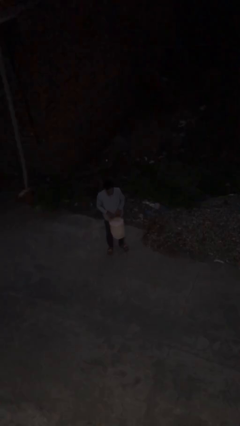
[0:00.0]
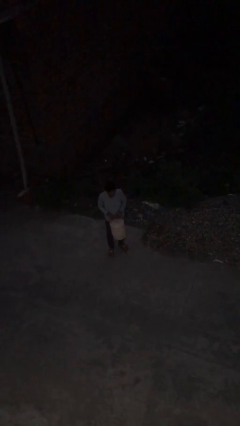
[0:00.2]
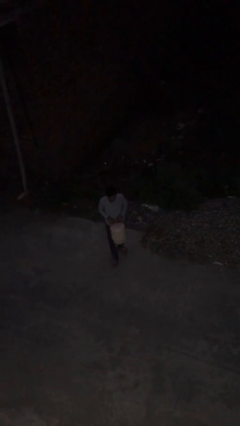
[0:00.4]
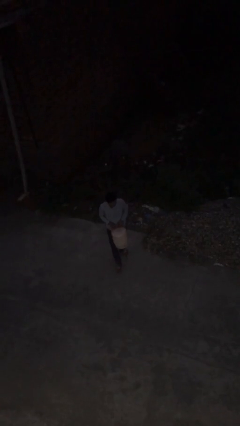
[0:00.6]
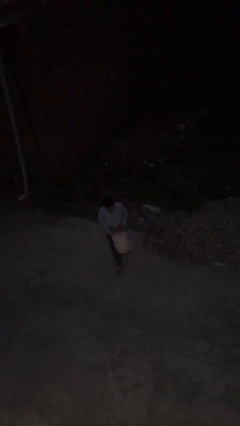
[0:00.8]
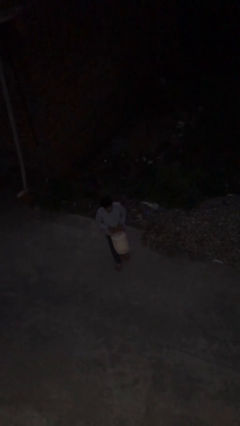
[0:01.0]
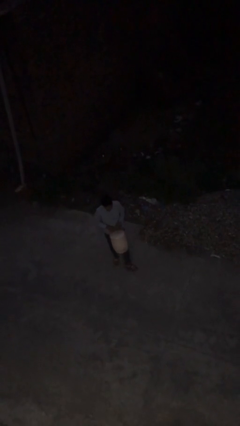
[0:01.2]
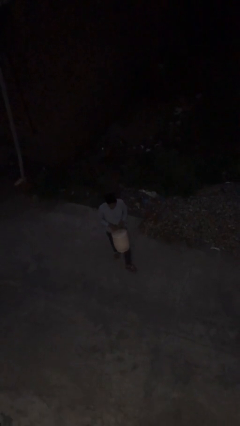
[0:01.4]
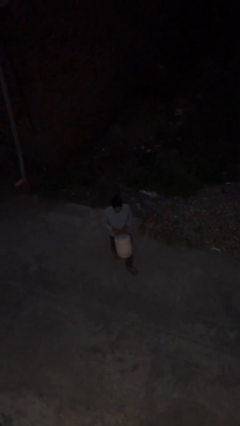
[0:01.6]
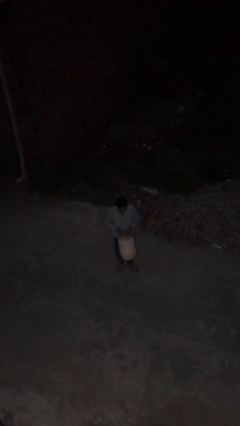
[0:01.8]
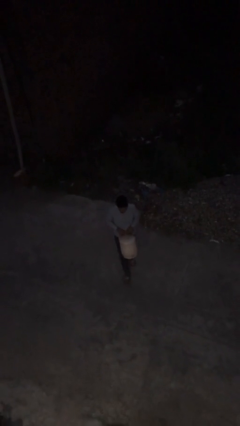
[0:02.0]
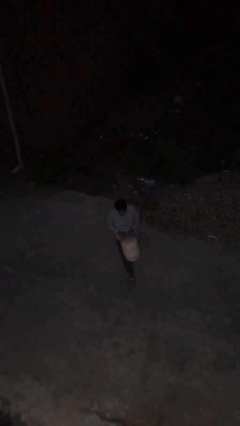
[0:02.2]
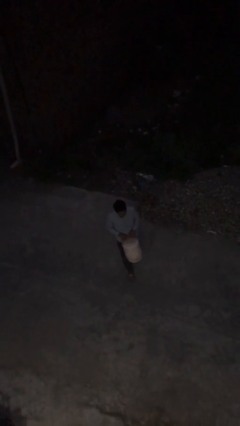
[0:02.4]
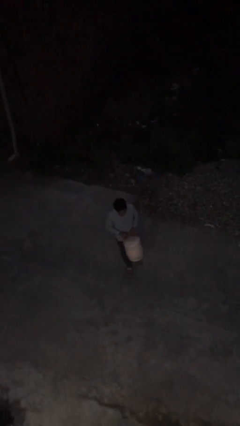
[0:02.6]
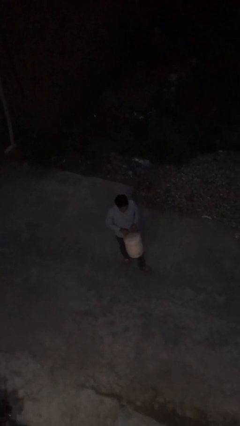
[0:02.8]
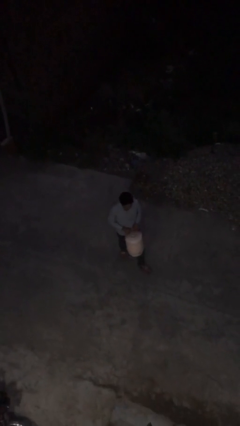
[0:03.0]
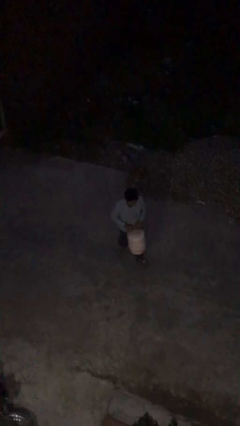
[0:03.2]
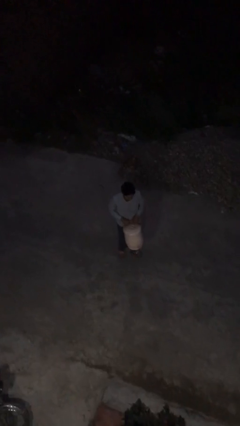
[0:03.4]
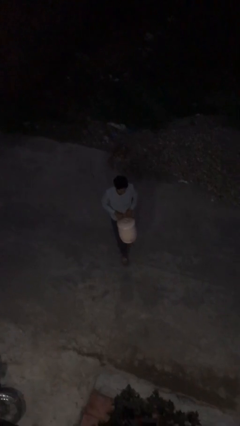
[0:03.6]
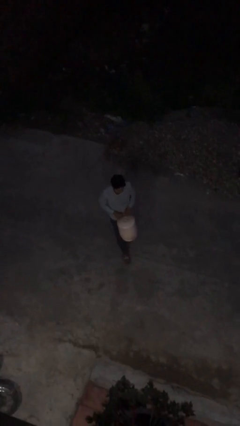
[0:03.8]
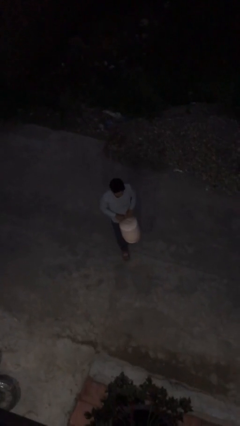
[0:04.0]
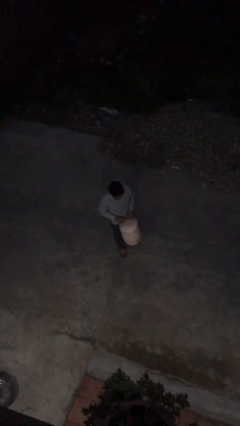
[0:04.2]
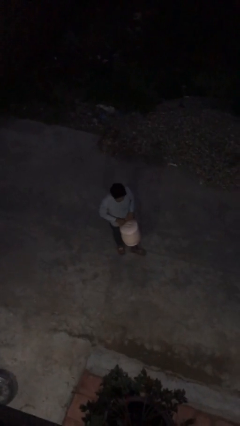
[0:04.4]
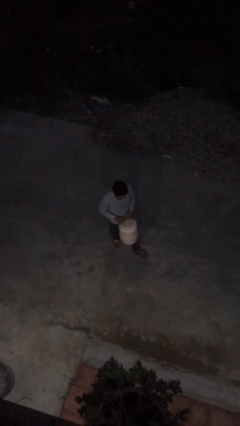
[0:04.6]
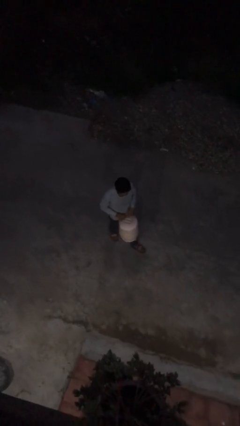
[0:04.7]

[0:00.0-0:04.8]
person carries heavy object

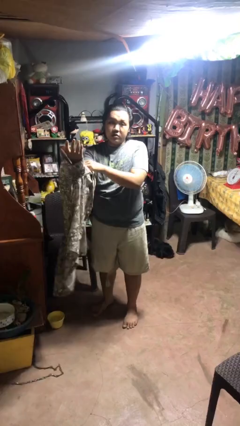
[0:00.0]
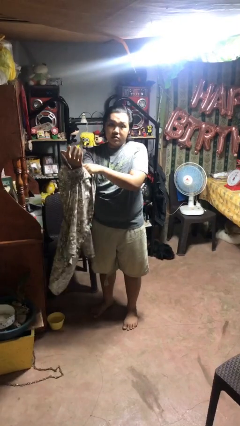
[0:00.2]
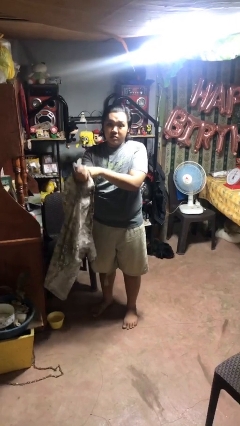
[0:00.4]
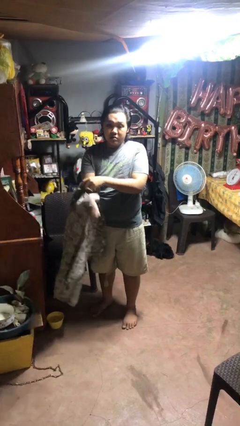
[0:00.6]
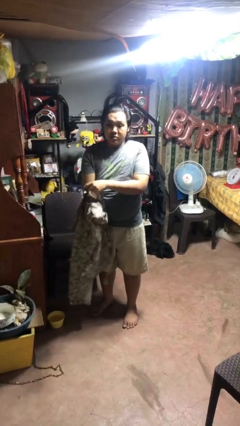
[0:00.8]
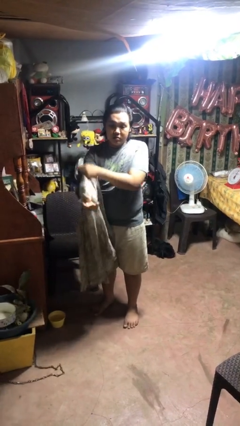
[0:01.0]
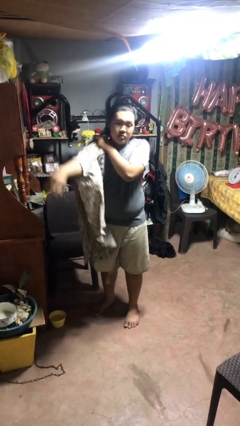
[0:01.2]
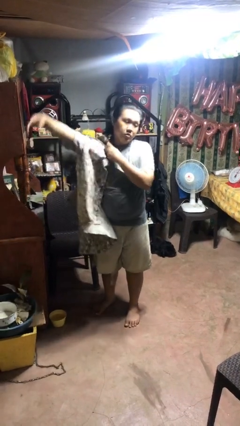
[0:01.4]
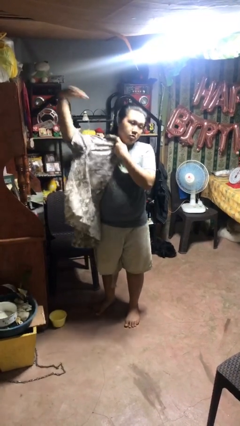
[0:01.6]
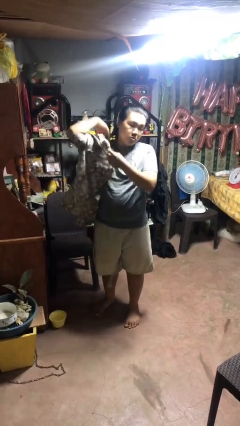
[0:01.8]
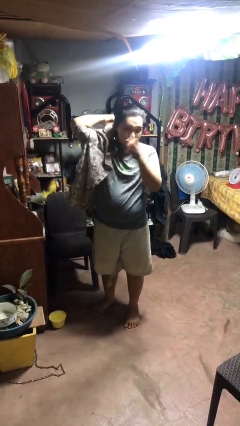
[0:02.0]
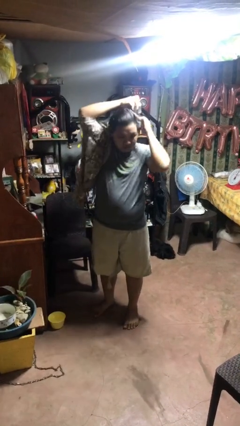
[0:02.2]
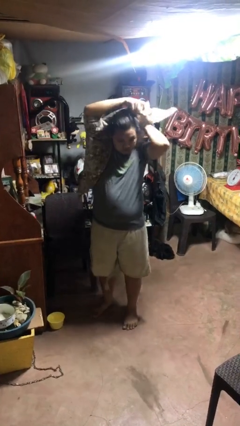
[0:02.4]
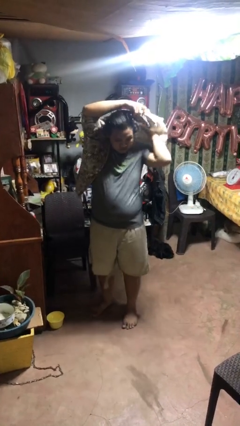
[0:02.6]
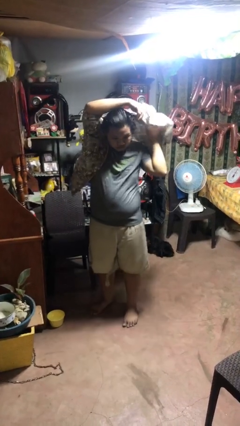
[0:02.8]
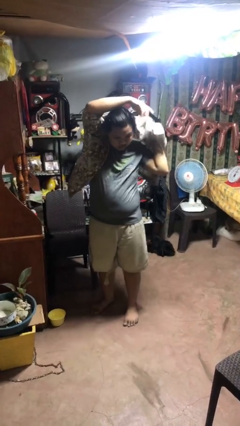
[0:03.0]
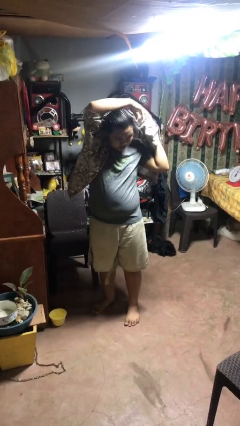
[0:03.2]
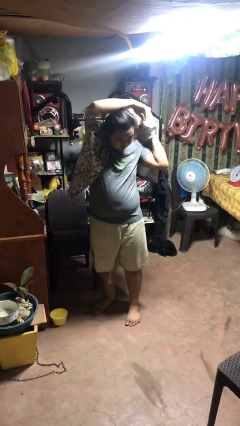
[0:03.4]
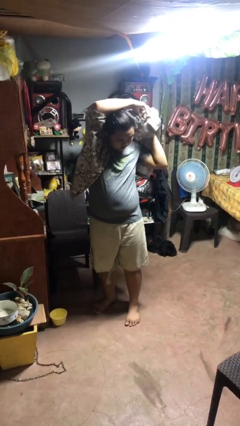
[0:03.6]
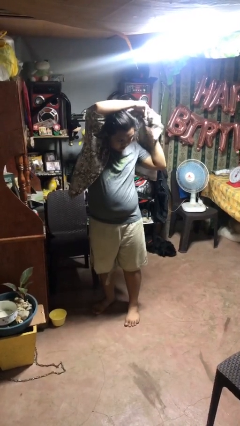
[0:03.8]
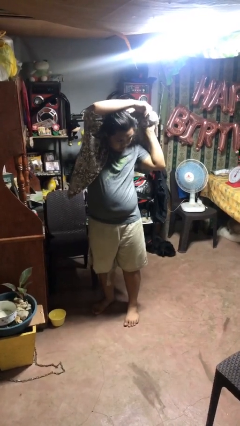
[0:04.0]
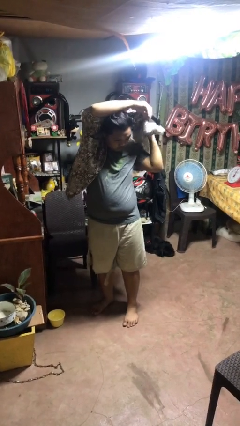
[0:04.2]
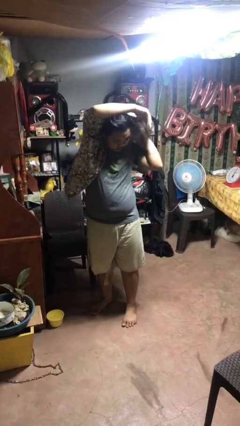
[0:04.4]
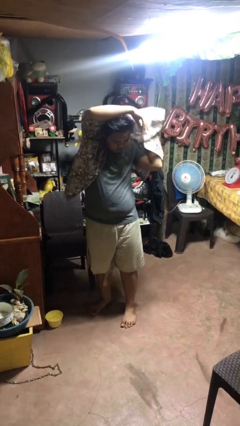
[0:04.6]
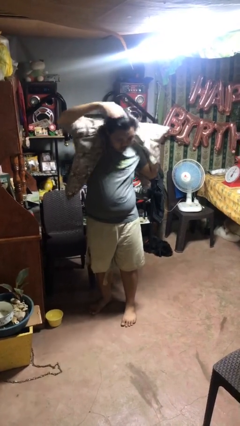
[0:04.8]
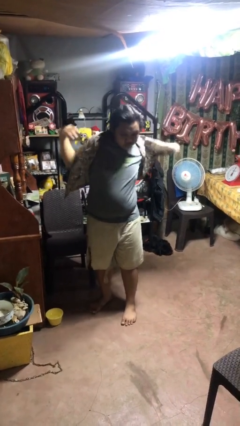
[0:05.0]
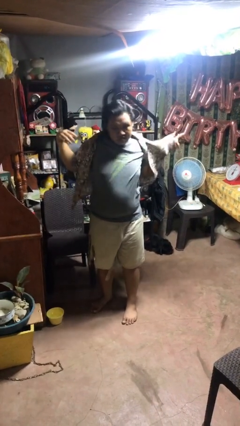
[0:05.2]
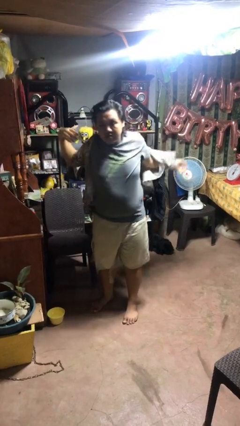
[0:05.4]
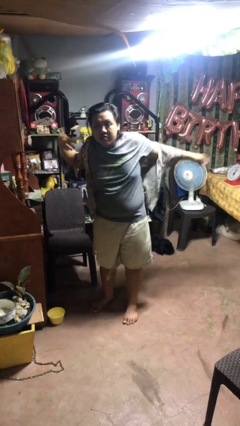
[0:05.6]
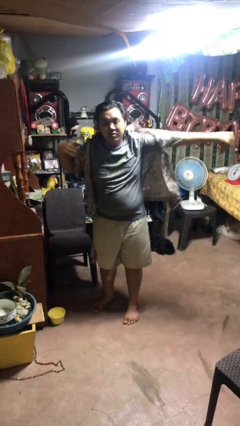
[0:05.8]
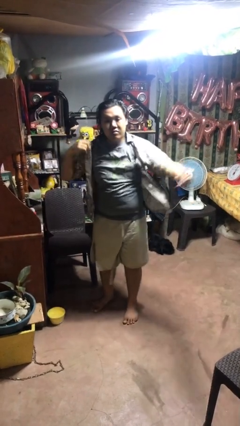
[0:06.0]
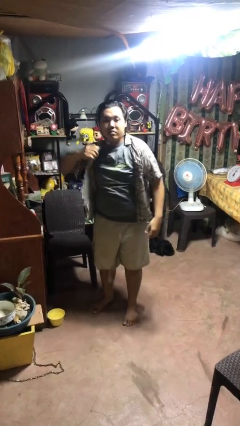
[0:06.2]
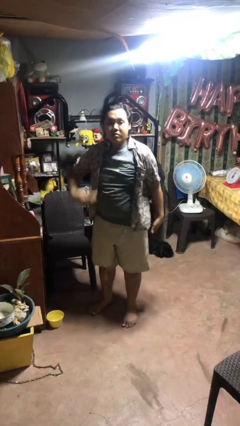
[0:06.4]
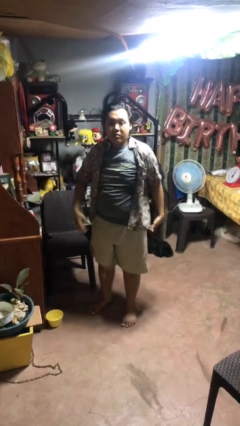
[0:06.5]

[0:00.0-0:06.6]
person puts on shirt

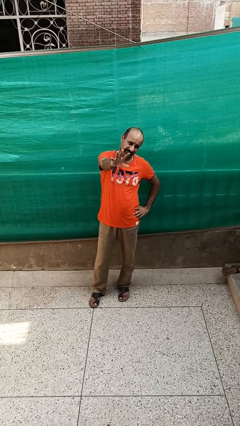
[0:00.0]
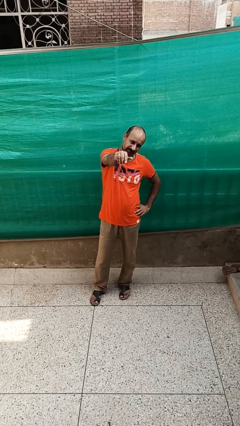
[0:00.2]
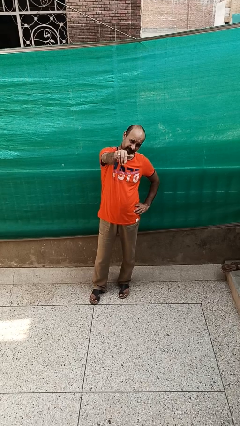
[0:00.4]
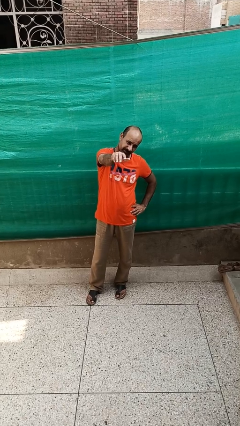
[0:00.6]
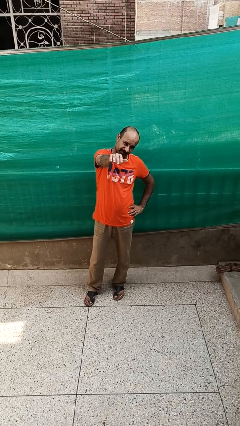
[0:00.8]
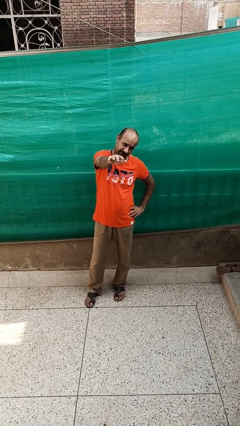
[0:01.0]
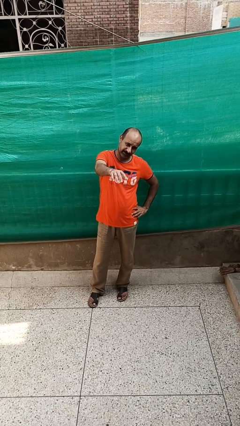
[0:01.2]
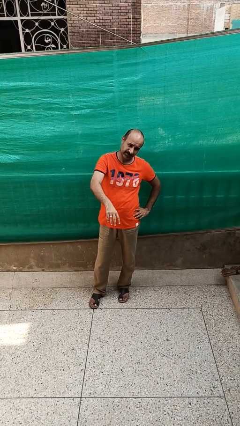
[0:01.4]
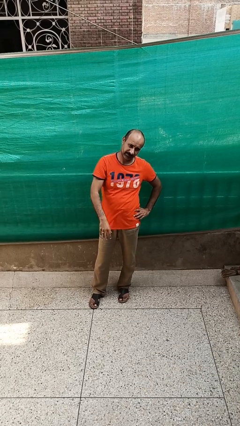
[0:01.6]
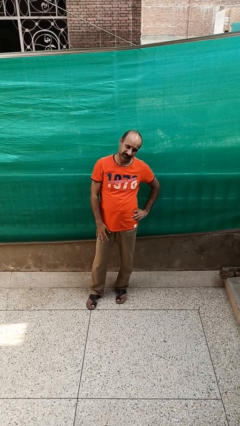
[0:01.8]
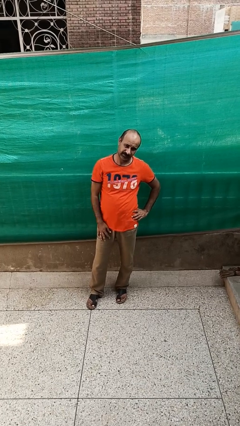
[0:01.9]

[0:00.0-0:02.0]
person gestures come here

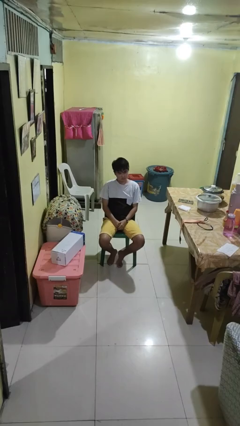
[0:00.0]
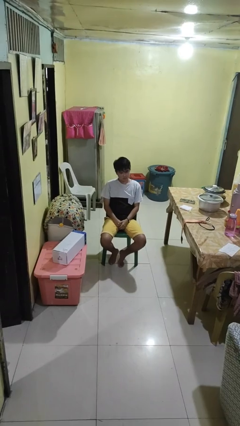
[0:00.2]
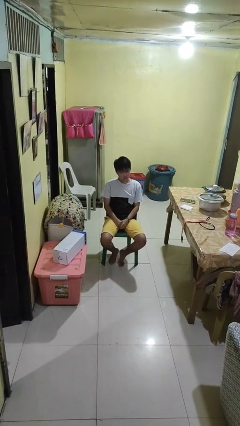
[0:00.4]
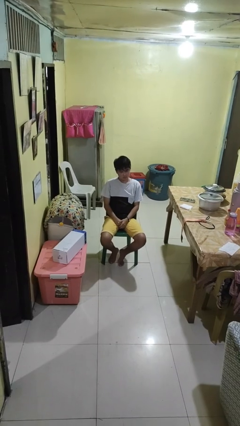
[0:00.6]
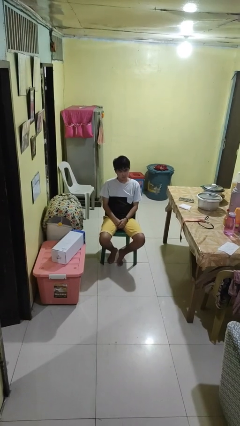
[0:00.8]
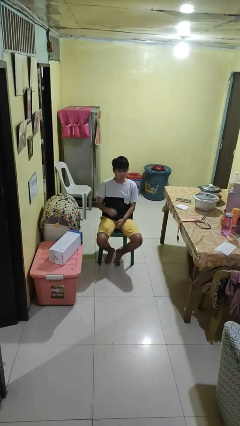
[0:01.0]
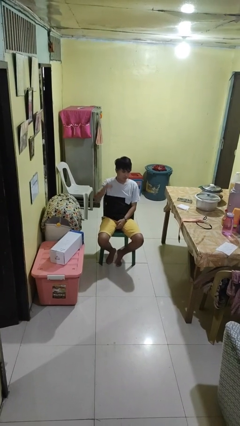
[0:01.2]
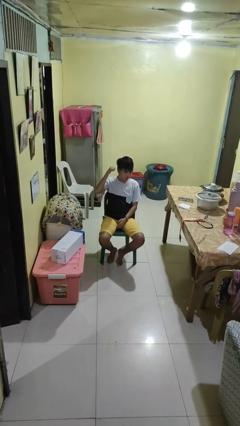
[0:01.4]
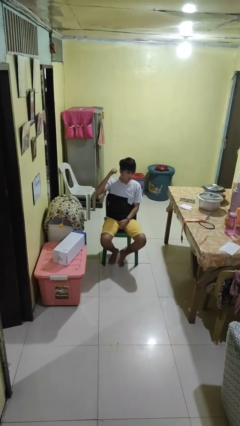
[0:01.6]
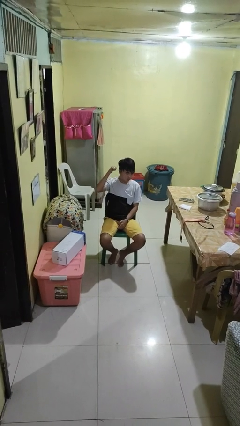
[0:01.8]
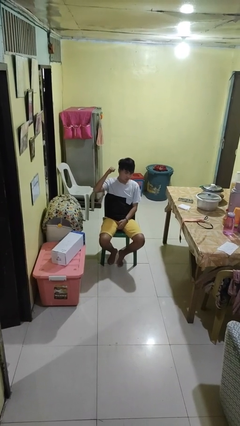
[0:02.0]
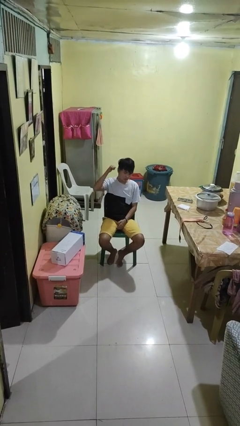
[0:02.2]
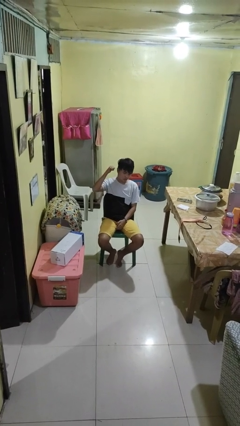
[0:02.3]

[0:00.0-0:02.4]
person gestures behind me

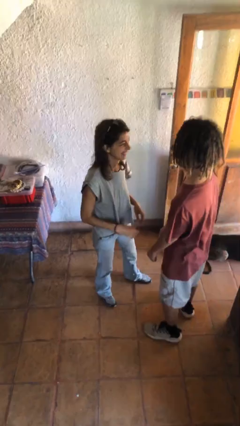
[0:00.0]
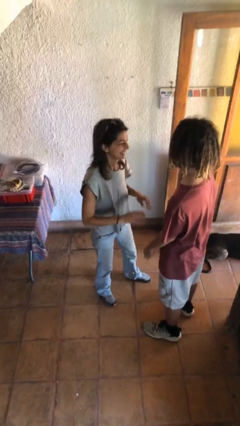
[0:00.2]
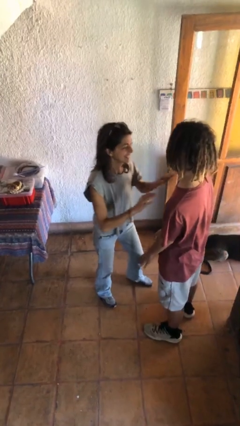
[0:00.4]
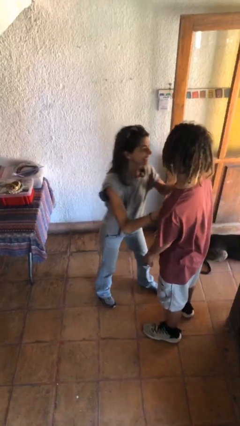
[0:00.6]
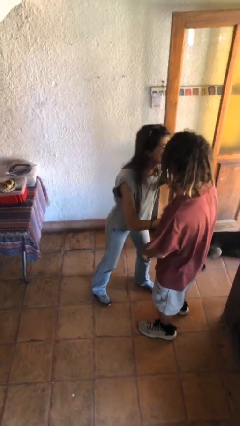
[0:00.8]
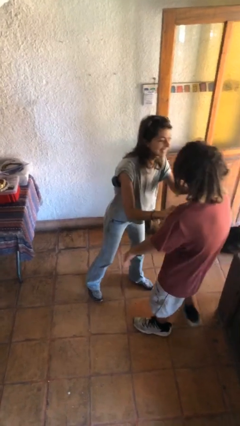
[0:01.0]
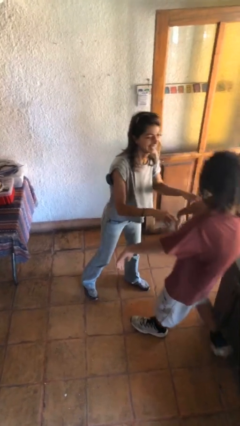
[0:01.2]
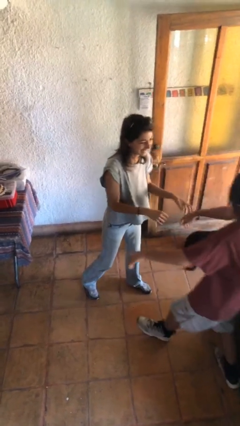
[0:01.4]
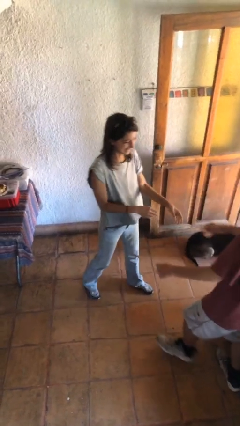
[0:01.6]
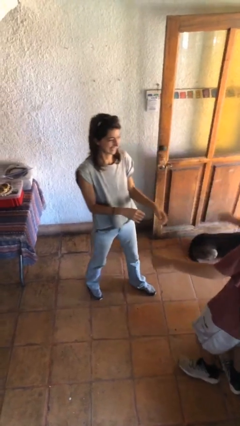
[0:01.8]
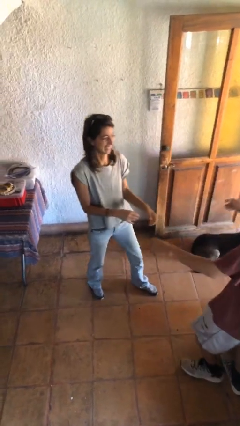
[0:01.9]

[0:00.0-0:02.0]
person shoves person
